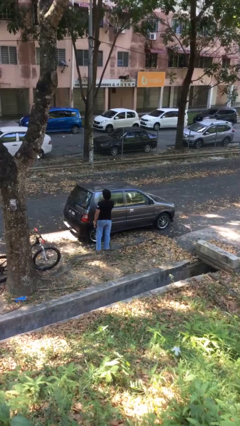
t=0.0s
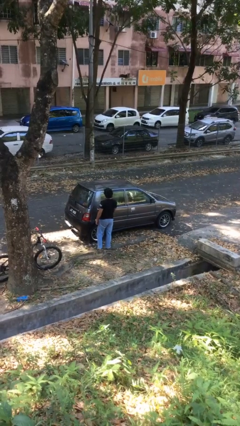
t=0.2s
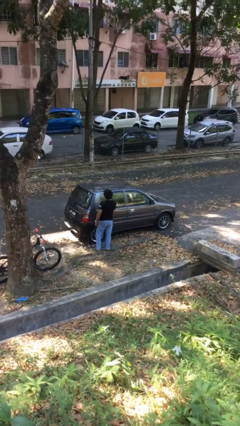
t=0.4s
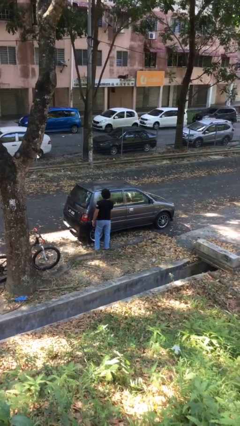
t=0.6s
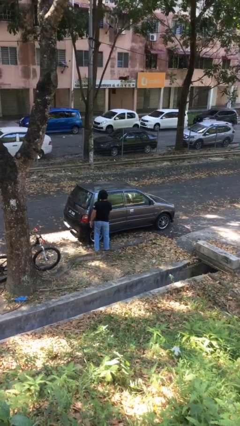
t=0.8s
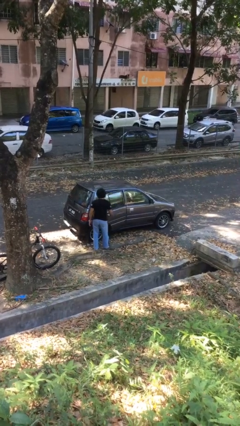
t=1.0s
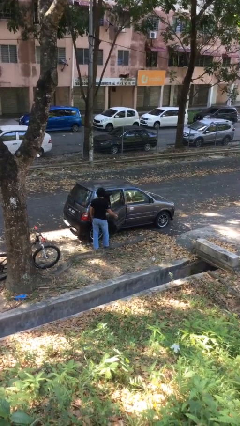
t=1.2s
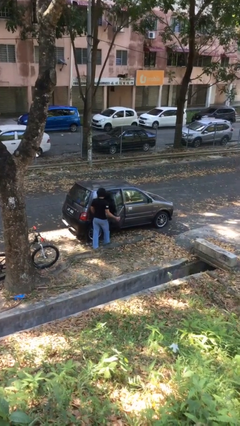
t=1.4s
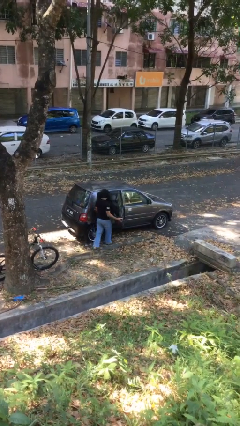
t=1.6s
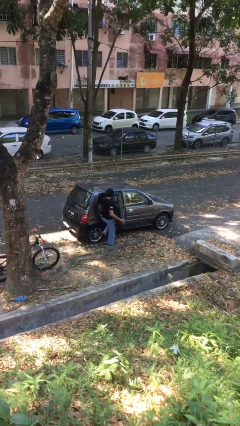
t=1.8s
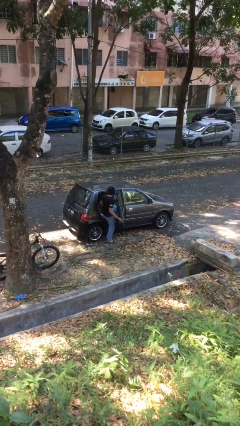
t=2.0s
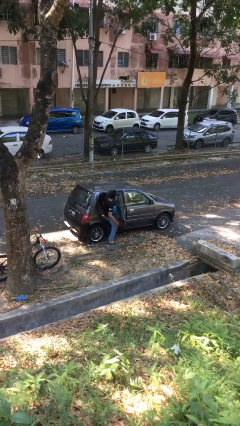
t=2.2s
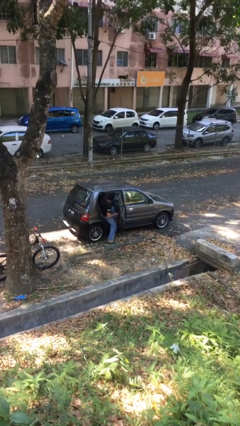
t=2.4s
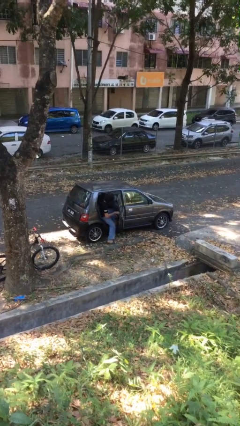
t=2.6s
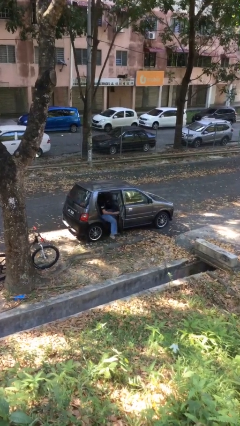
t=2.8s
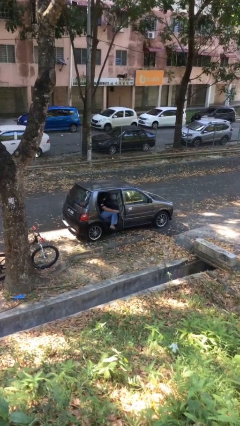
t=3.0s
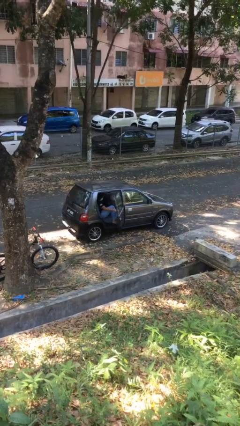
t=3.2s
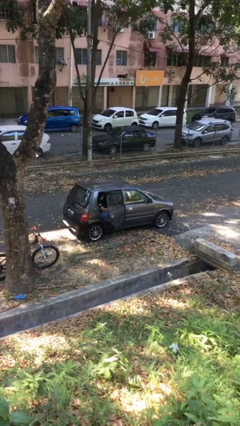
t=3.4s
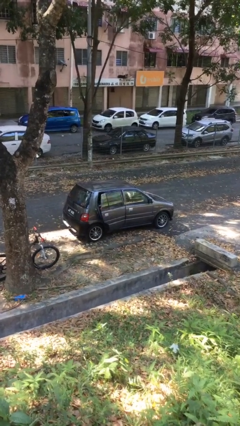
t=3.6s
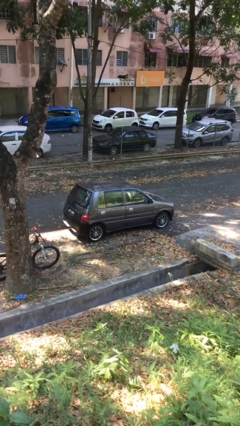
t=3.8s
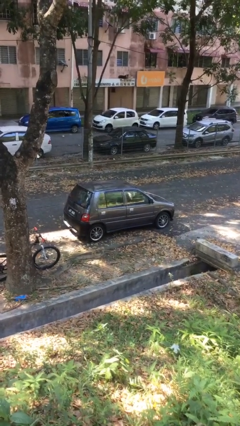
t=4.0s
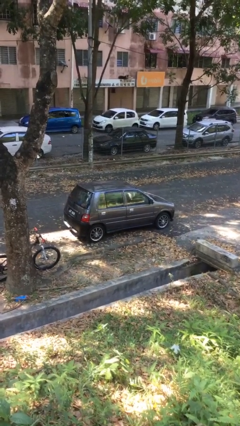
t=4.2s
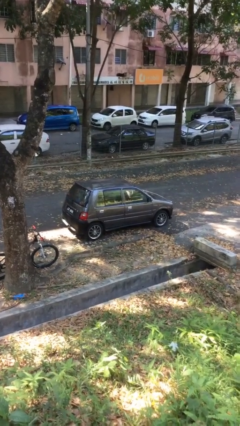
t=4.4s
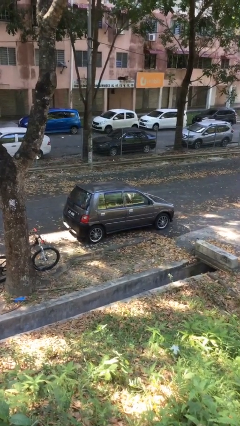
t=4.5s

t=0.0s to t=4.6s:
car picks up person

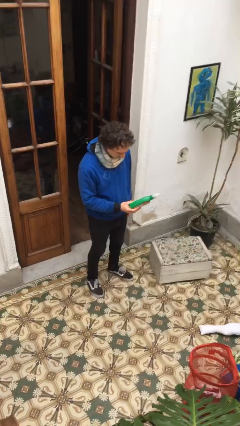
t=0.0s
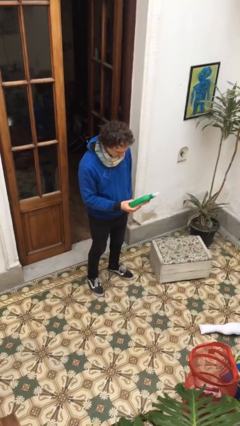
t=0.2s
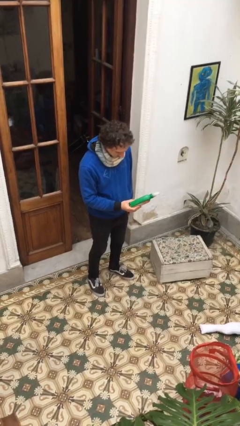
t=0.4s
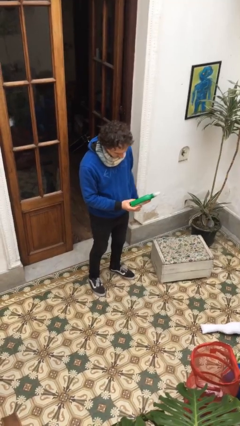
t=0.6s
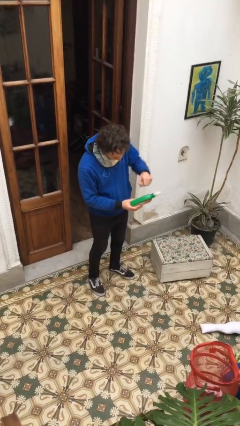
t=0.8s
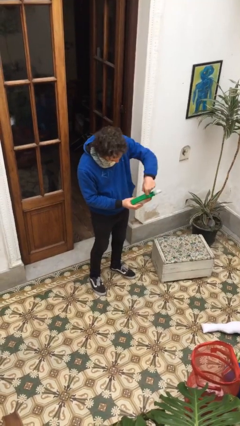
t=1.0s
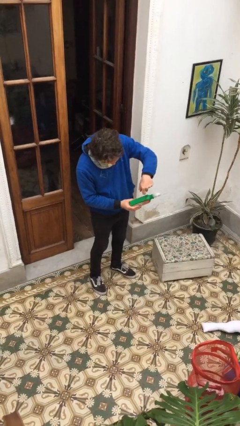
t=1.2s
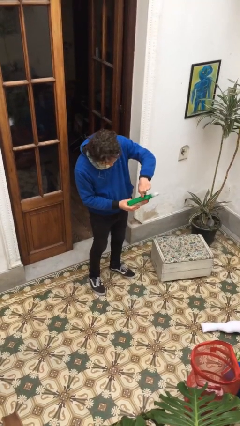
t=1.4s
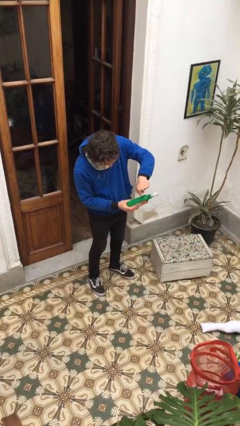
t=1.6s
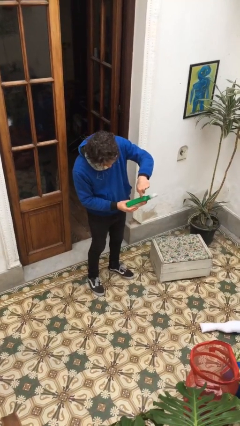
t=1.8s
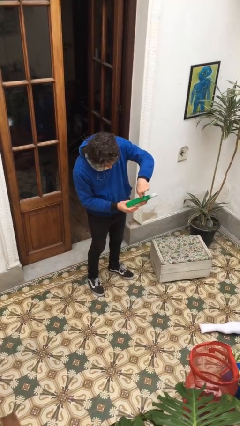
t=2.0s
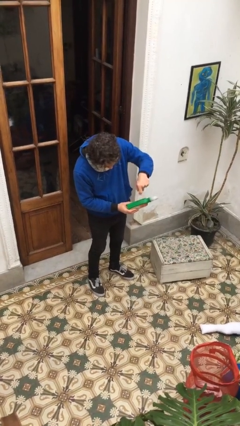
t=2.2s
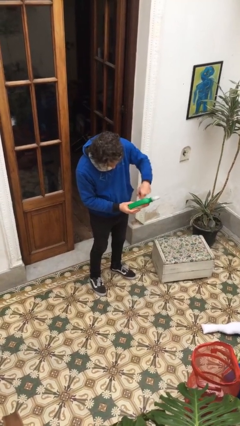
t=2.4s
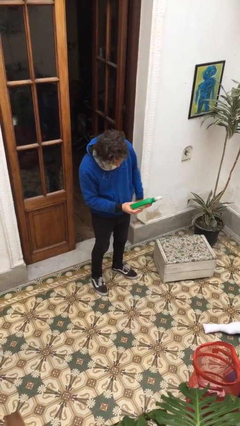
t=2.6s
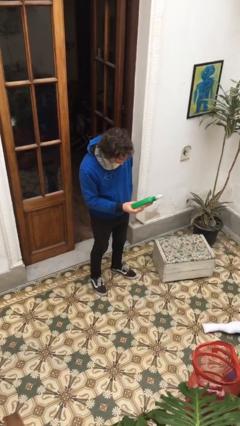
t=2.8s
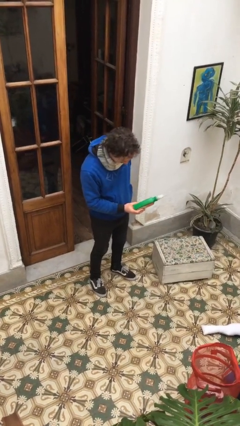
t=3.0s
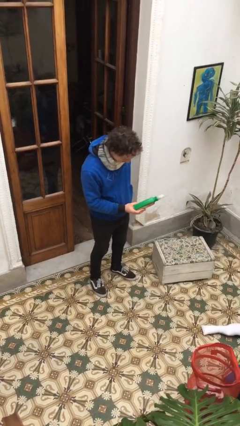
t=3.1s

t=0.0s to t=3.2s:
person taps object with finger

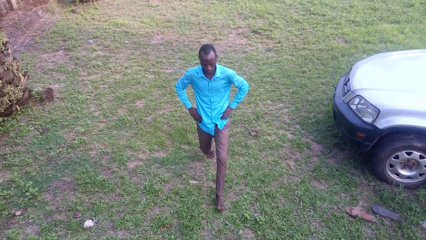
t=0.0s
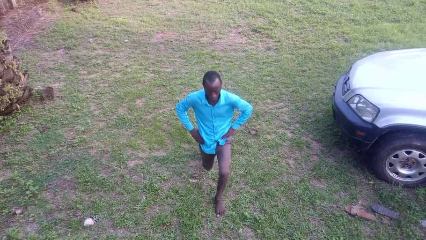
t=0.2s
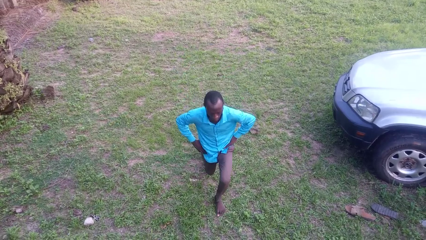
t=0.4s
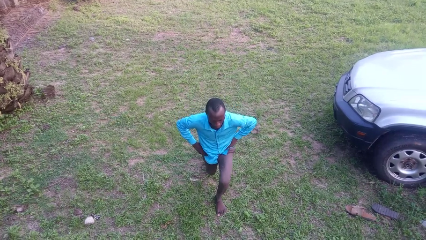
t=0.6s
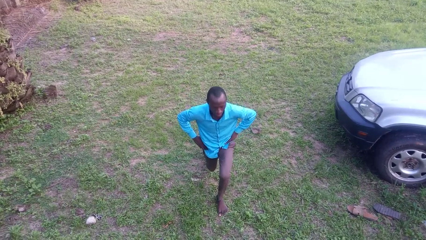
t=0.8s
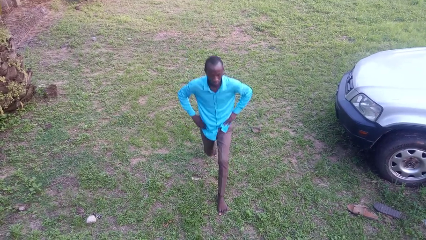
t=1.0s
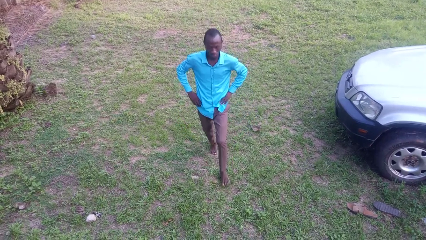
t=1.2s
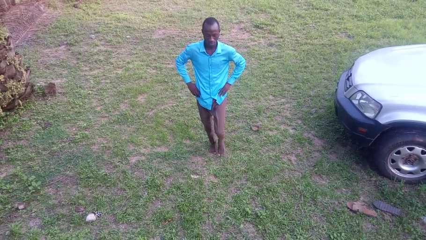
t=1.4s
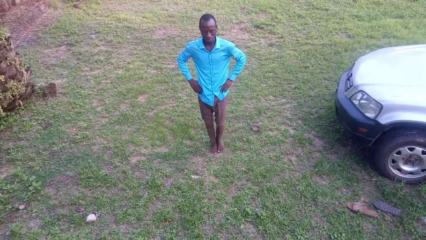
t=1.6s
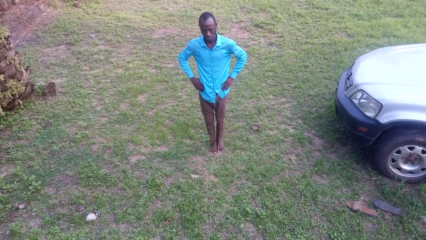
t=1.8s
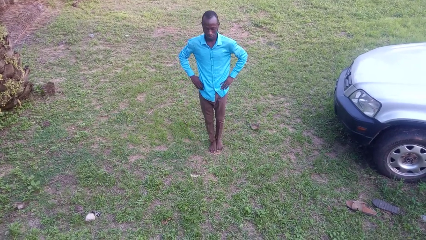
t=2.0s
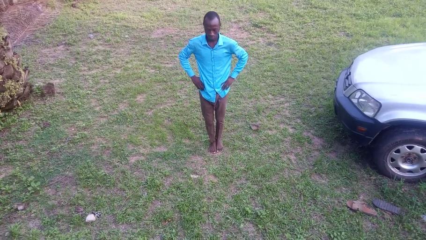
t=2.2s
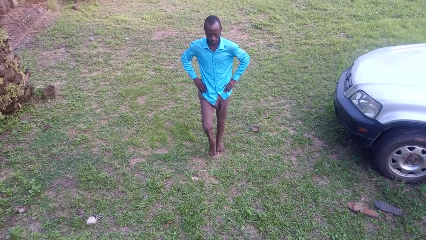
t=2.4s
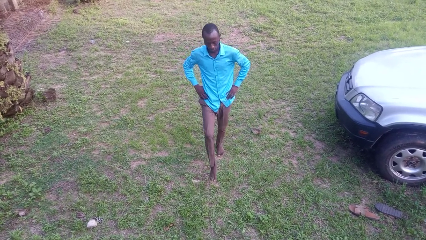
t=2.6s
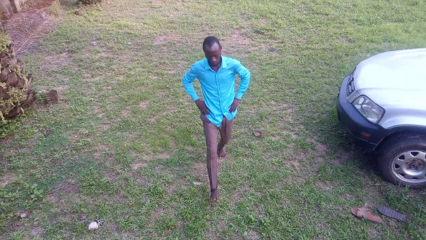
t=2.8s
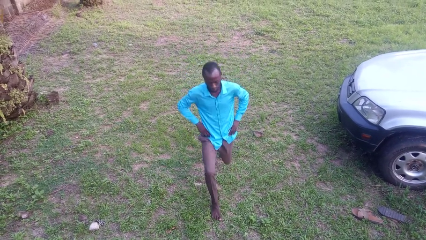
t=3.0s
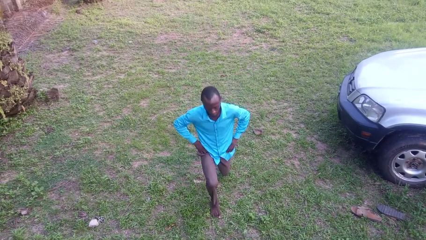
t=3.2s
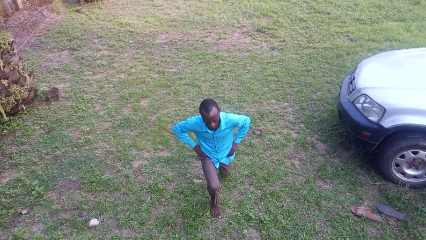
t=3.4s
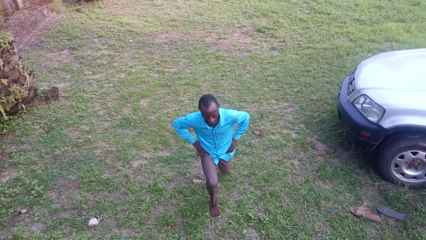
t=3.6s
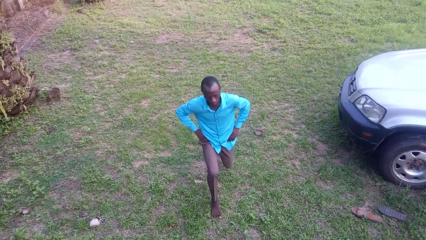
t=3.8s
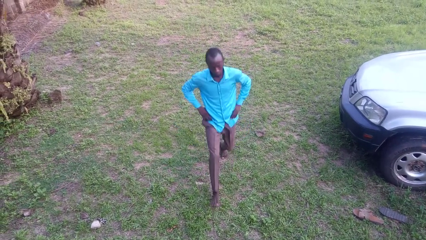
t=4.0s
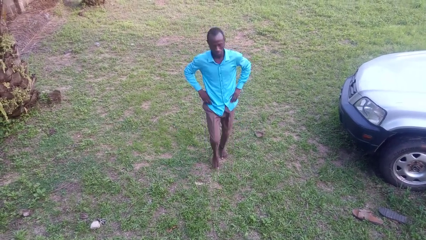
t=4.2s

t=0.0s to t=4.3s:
person exercises with lunges

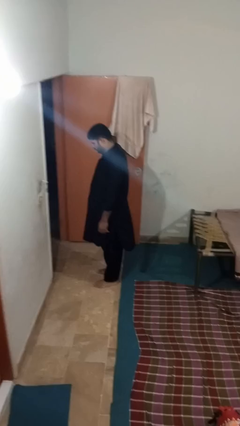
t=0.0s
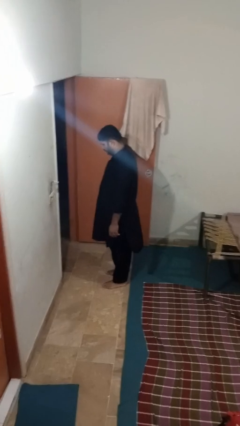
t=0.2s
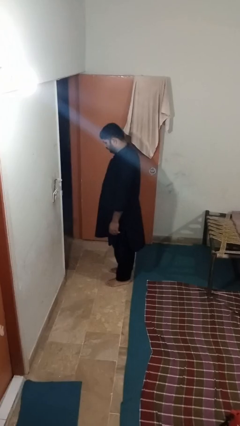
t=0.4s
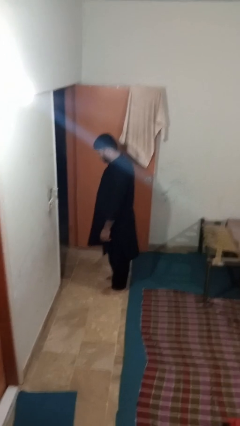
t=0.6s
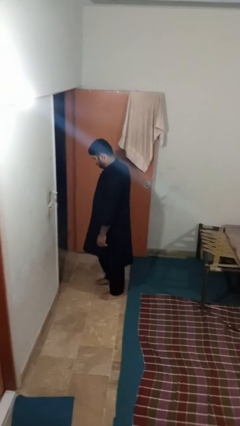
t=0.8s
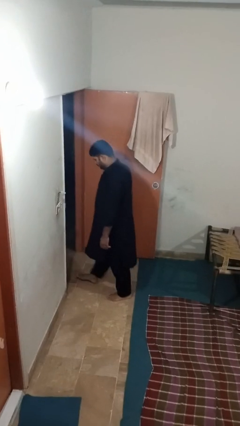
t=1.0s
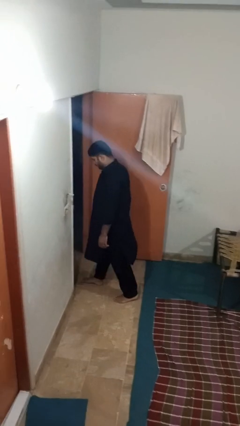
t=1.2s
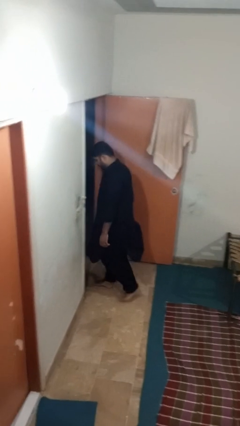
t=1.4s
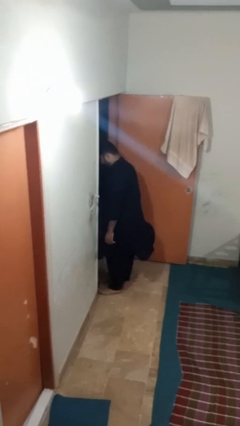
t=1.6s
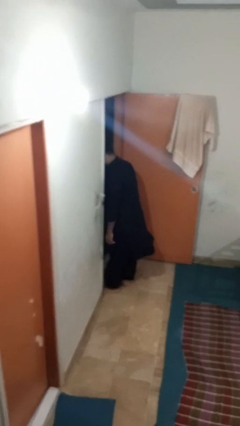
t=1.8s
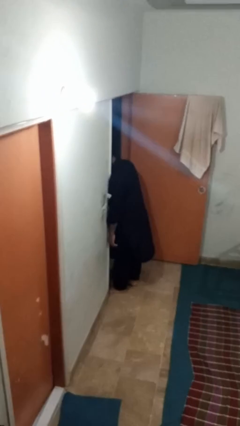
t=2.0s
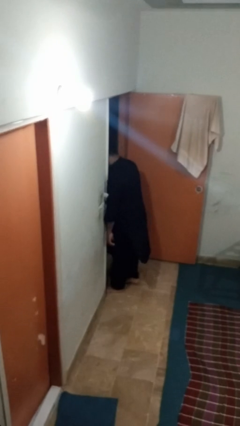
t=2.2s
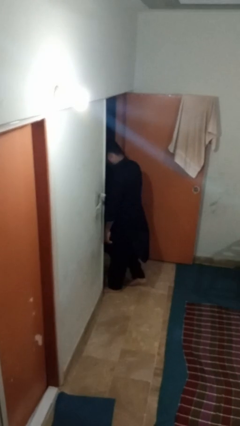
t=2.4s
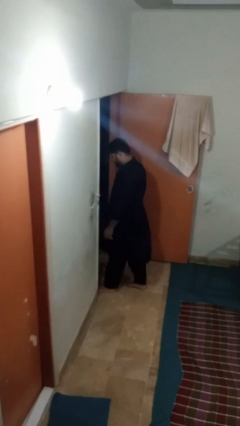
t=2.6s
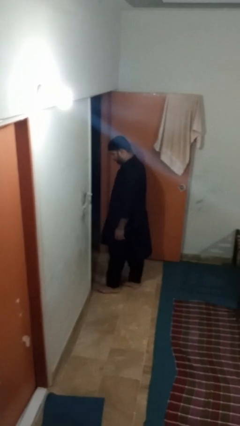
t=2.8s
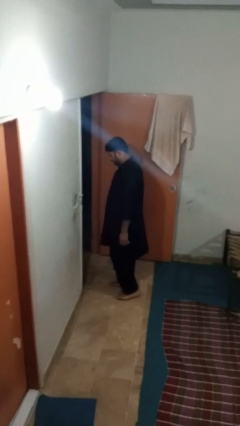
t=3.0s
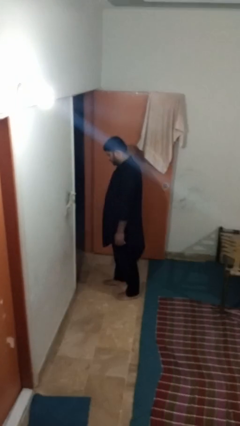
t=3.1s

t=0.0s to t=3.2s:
person bumps into wall

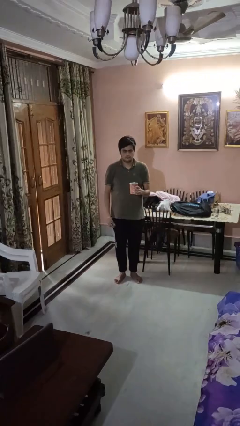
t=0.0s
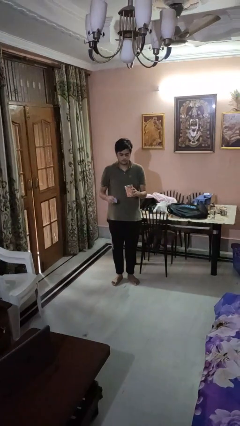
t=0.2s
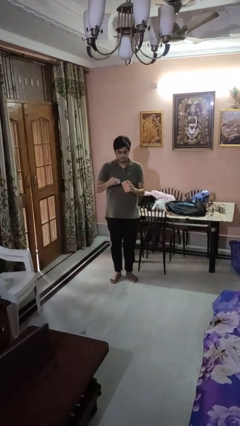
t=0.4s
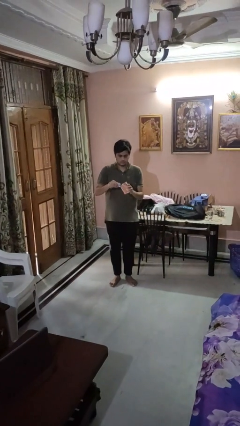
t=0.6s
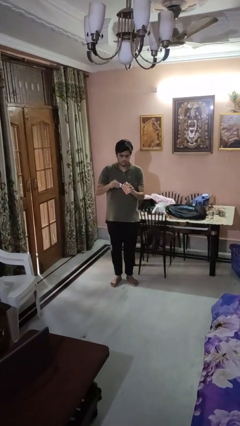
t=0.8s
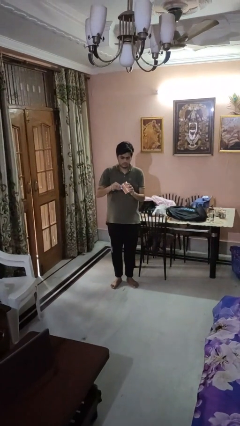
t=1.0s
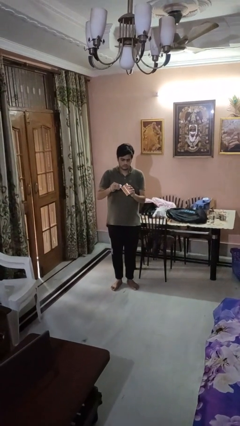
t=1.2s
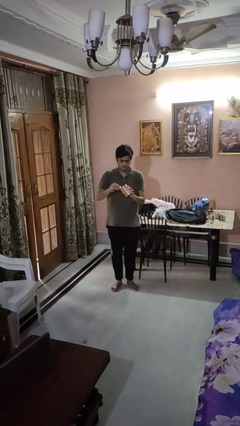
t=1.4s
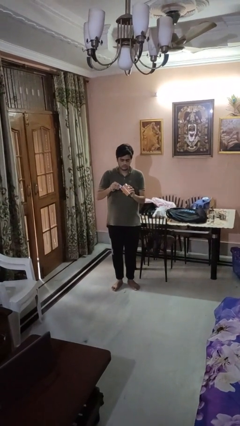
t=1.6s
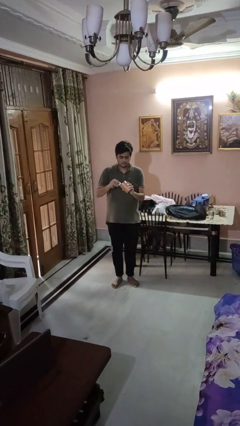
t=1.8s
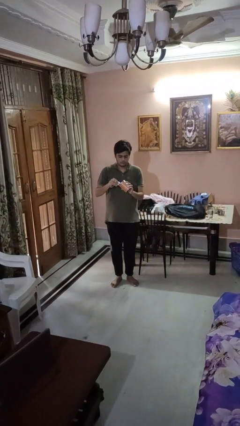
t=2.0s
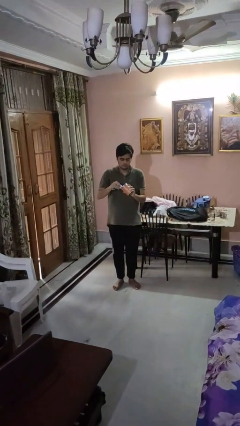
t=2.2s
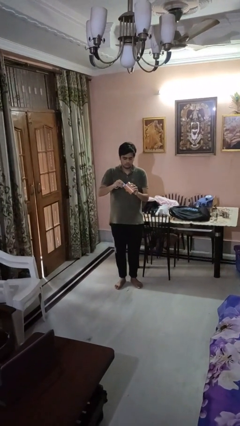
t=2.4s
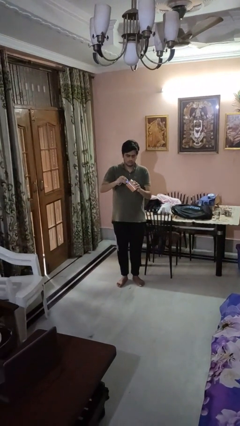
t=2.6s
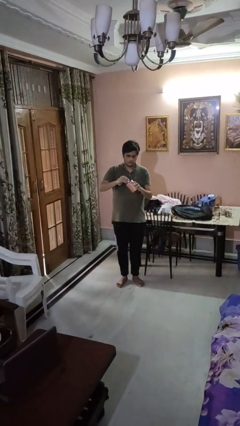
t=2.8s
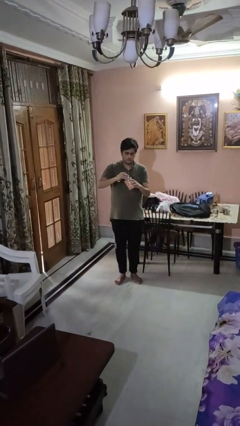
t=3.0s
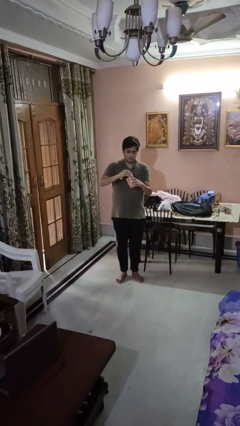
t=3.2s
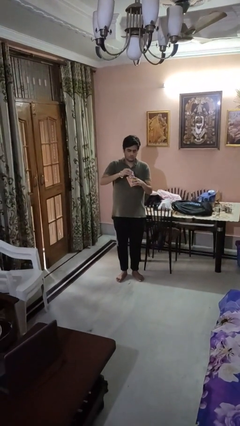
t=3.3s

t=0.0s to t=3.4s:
person opens can with can opener
